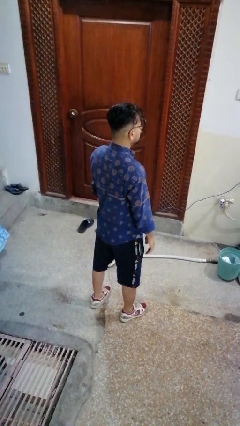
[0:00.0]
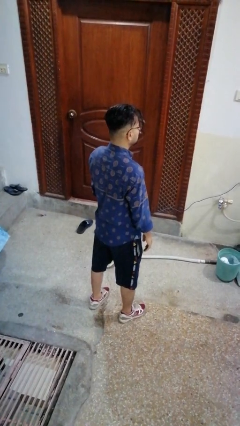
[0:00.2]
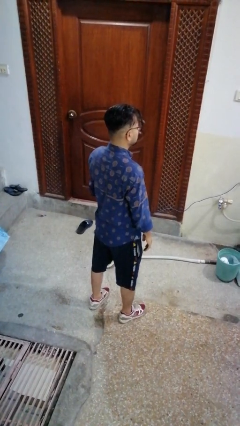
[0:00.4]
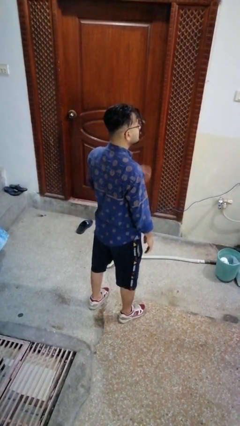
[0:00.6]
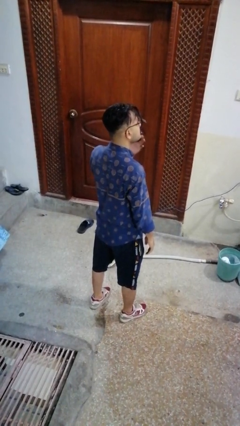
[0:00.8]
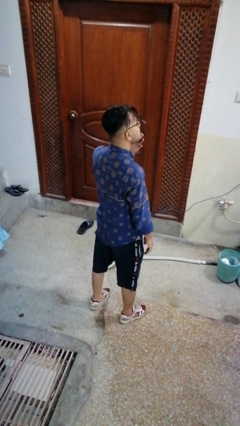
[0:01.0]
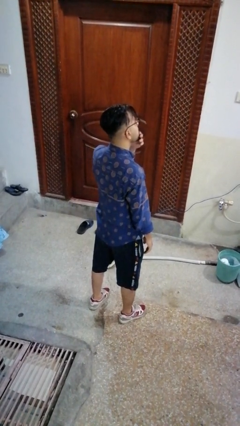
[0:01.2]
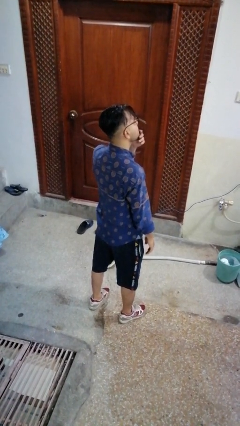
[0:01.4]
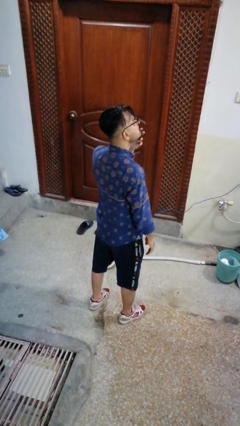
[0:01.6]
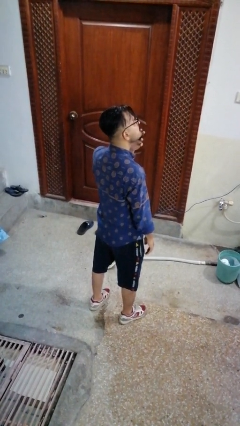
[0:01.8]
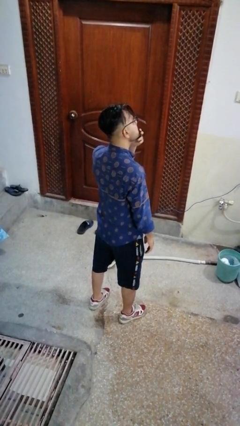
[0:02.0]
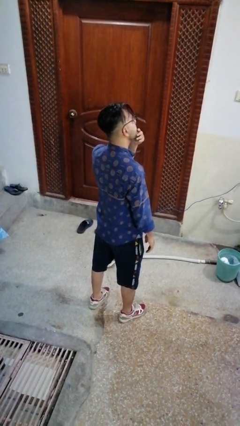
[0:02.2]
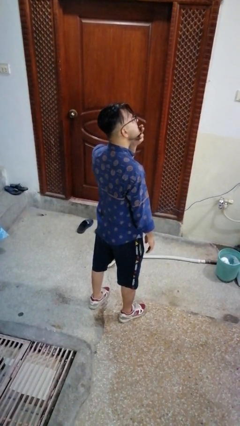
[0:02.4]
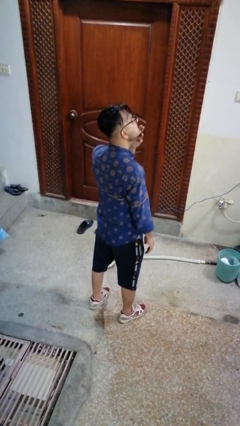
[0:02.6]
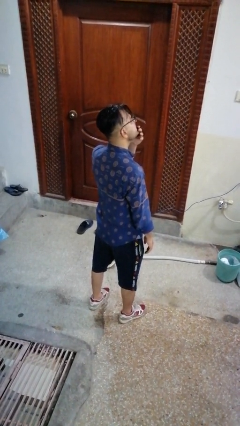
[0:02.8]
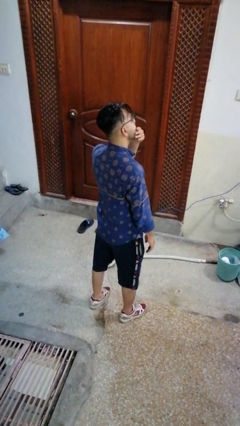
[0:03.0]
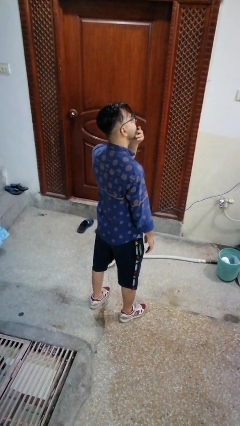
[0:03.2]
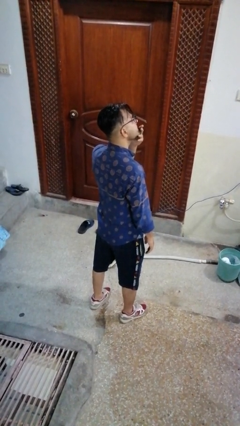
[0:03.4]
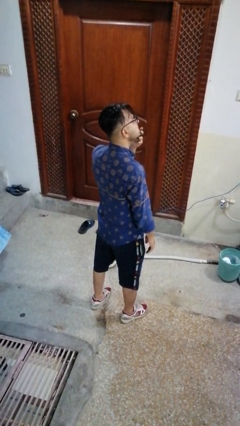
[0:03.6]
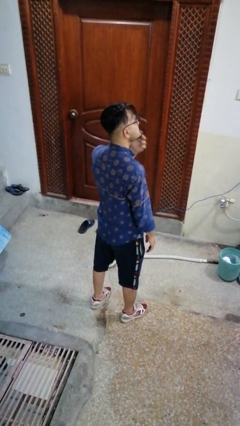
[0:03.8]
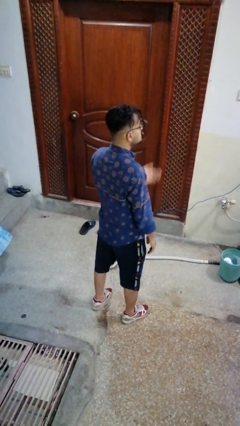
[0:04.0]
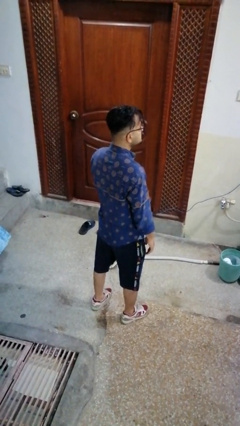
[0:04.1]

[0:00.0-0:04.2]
person strokes chin

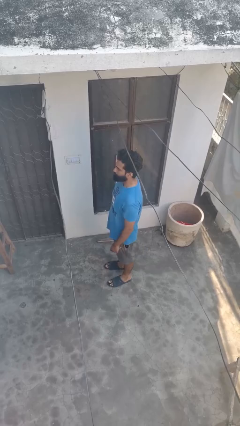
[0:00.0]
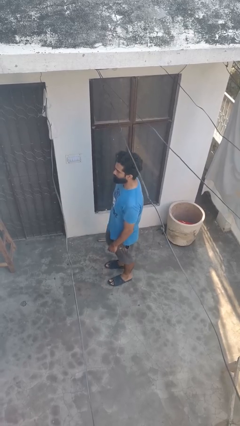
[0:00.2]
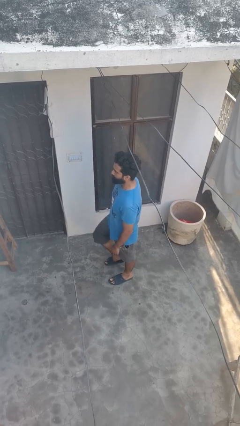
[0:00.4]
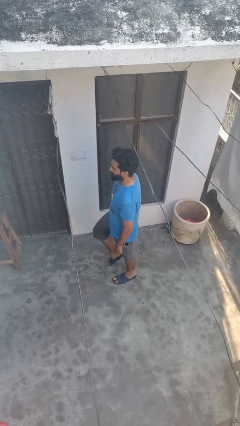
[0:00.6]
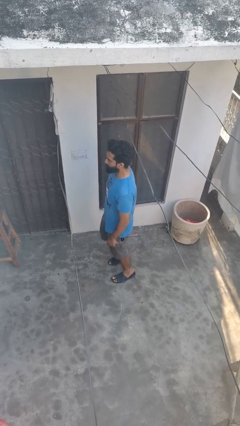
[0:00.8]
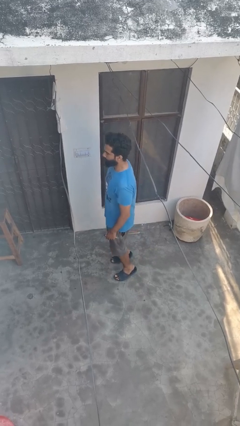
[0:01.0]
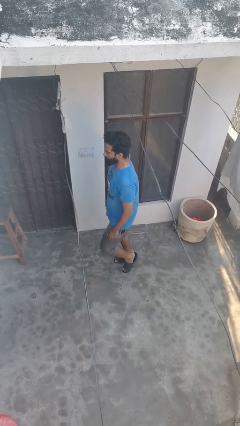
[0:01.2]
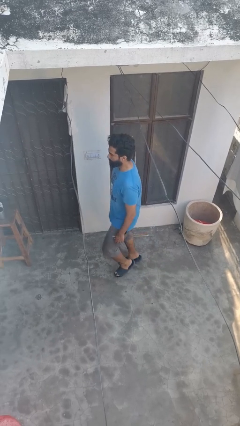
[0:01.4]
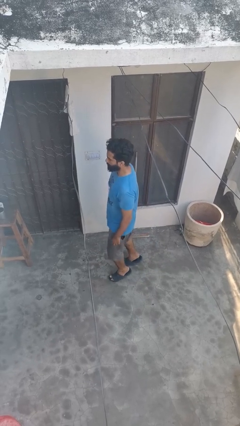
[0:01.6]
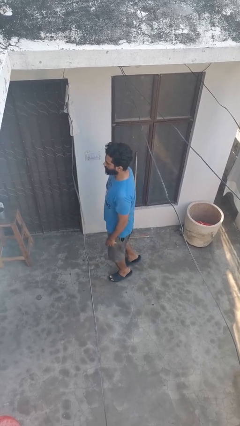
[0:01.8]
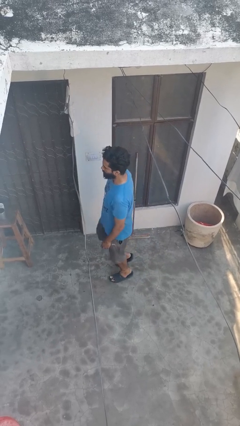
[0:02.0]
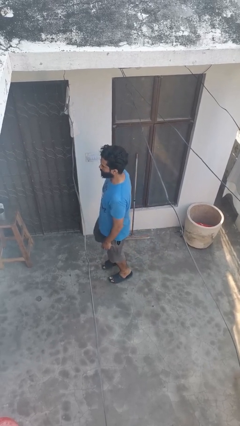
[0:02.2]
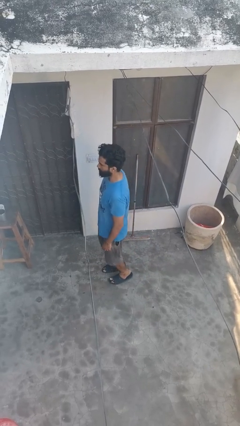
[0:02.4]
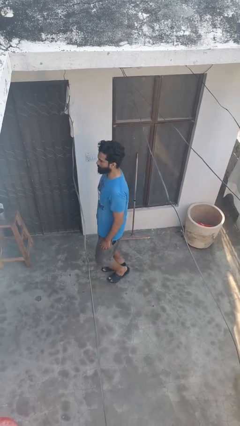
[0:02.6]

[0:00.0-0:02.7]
person walks tiptoe

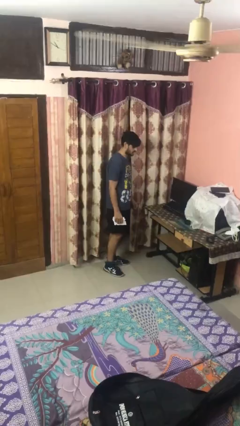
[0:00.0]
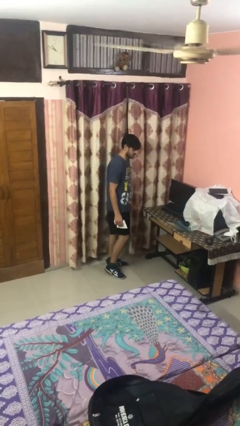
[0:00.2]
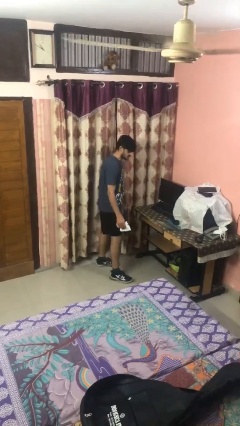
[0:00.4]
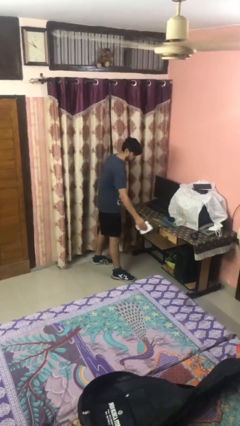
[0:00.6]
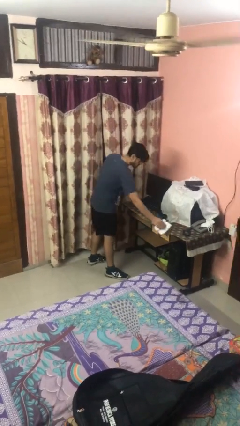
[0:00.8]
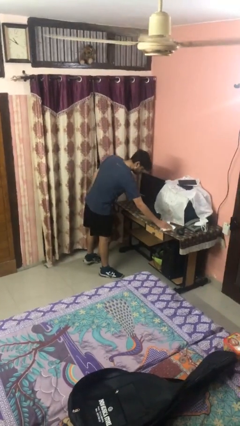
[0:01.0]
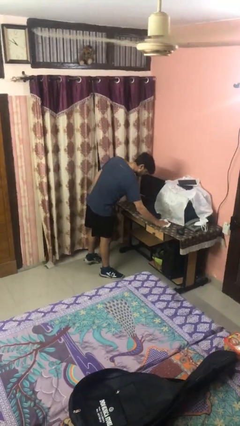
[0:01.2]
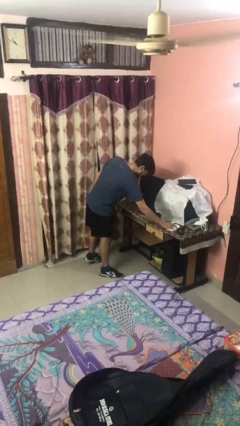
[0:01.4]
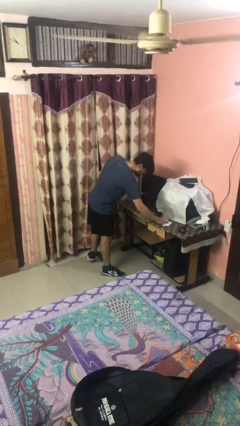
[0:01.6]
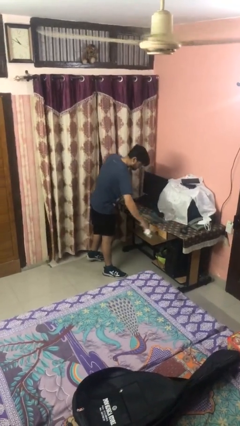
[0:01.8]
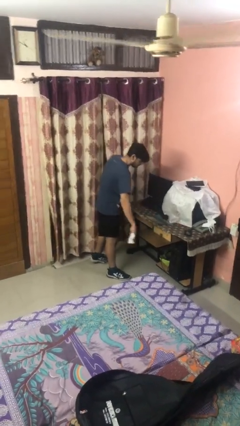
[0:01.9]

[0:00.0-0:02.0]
person cleans table with rag

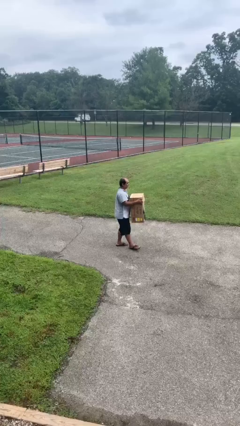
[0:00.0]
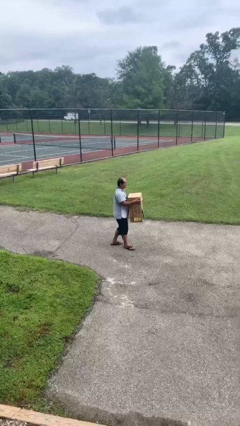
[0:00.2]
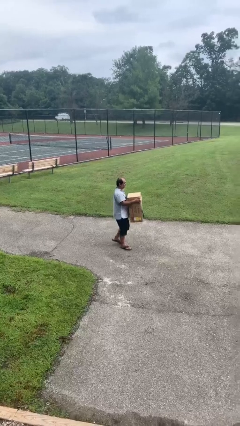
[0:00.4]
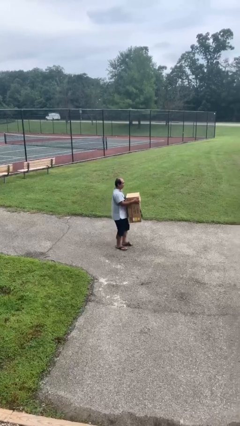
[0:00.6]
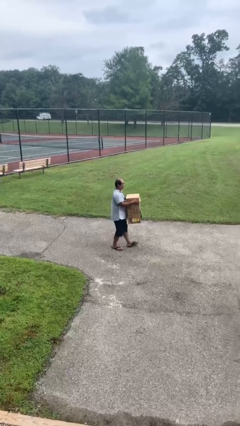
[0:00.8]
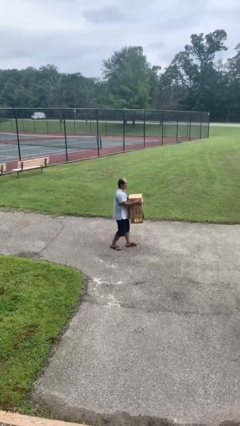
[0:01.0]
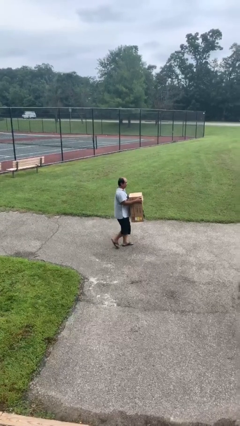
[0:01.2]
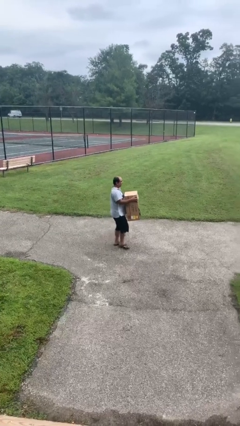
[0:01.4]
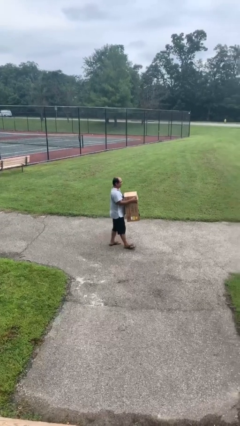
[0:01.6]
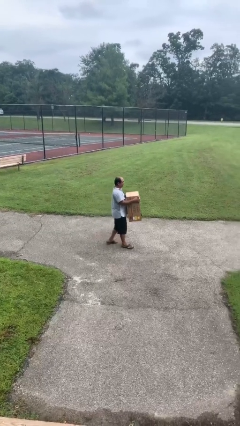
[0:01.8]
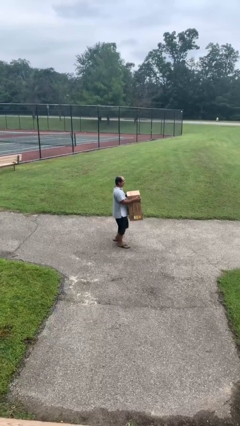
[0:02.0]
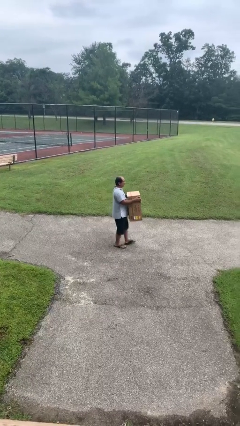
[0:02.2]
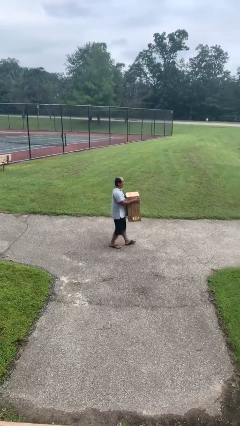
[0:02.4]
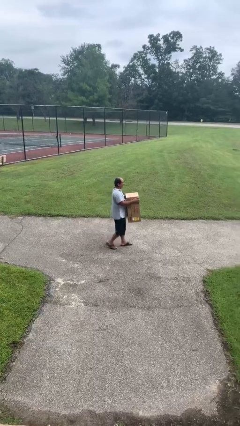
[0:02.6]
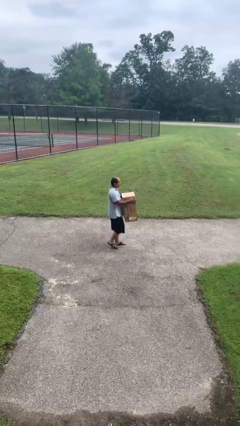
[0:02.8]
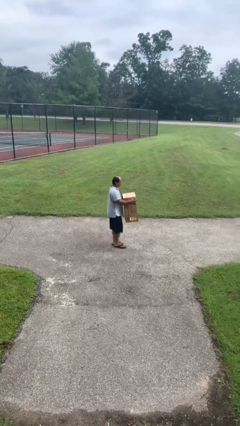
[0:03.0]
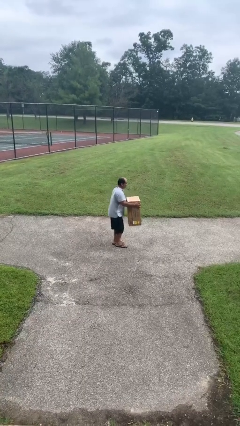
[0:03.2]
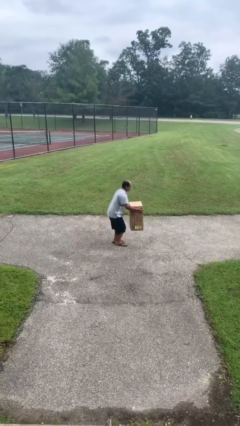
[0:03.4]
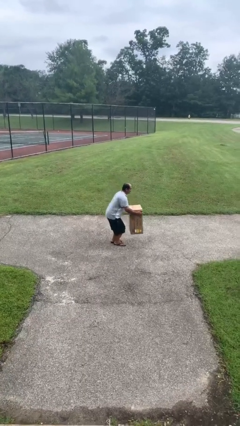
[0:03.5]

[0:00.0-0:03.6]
person carries heavy object

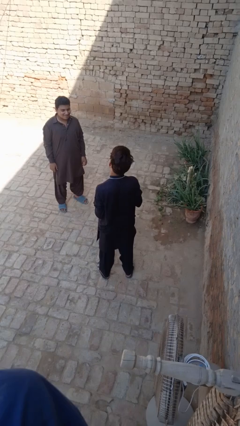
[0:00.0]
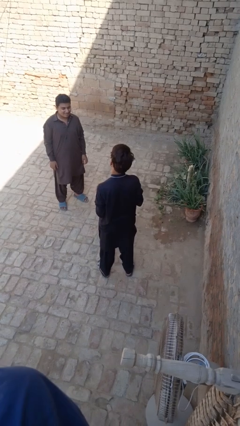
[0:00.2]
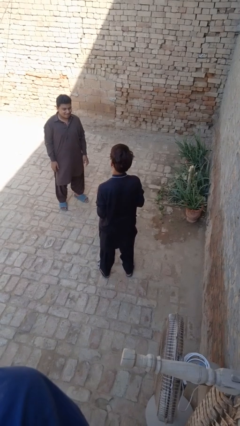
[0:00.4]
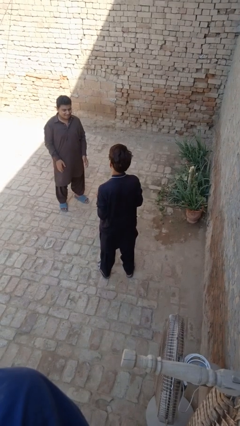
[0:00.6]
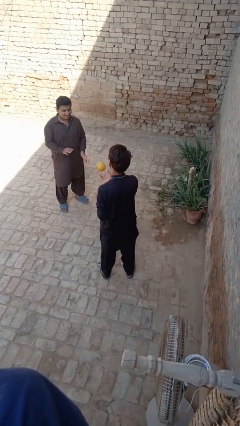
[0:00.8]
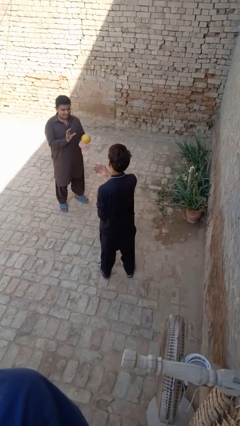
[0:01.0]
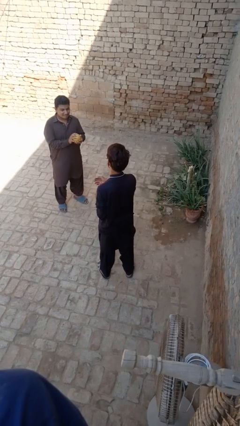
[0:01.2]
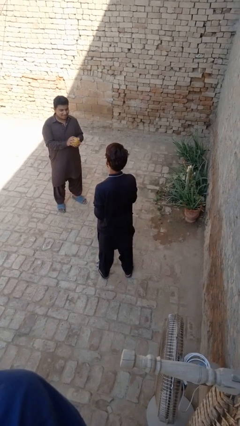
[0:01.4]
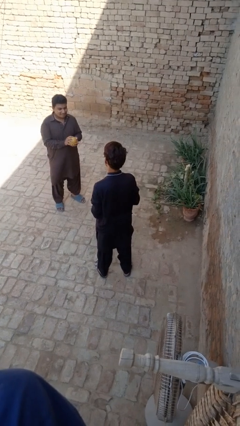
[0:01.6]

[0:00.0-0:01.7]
person throws object to person

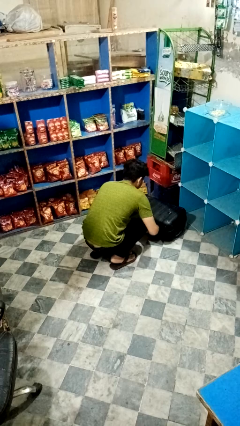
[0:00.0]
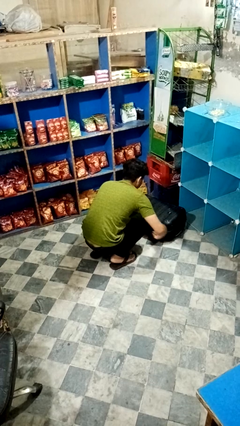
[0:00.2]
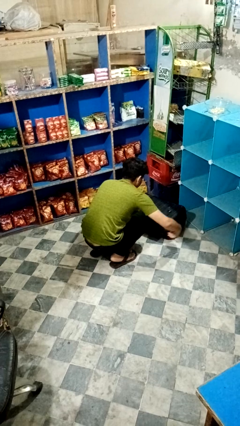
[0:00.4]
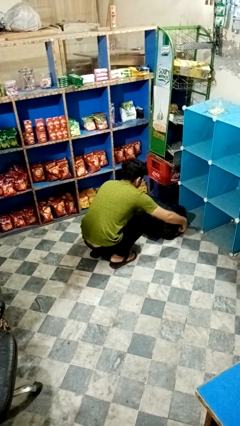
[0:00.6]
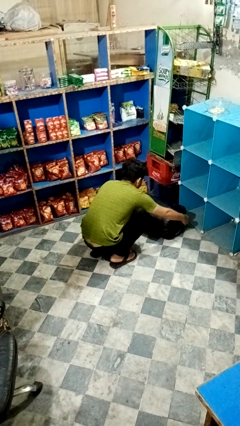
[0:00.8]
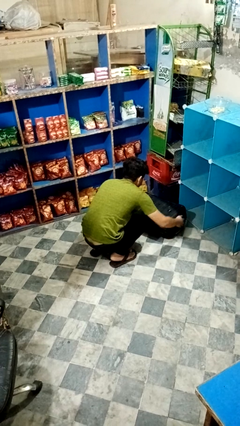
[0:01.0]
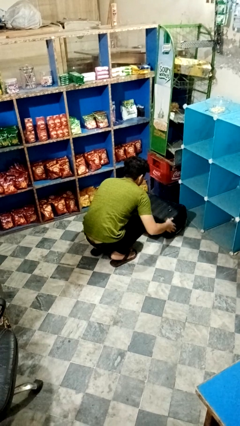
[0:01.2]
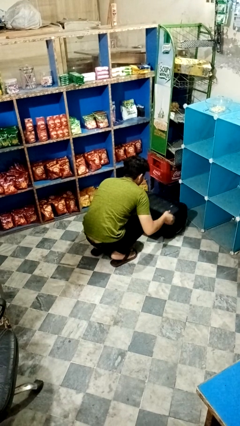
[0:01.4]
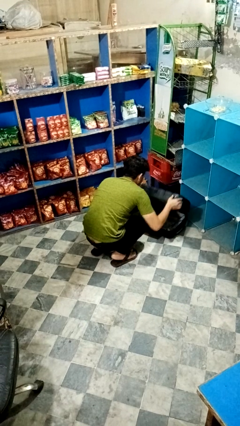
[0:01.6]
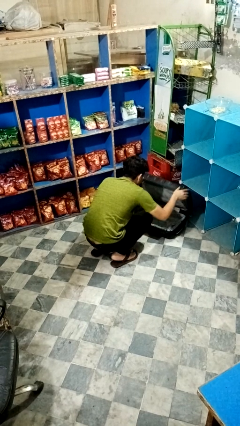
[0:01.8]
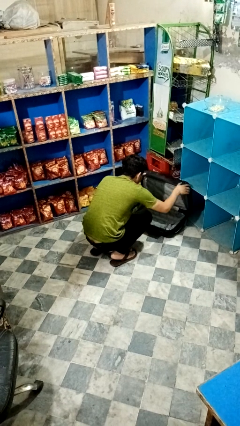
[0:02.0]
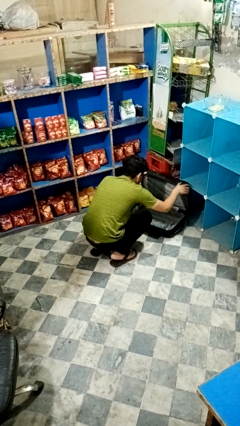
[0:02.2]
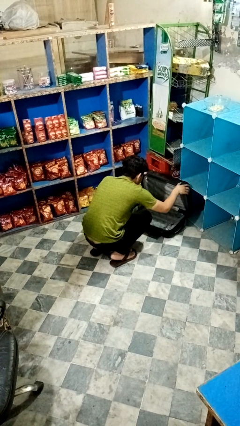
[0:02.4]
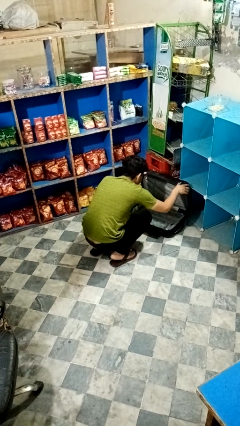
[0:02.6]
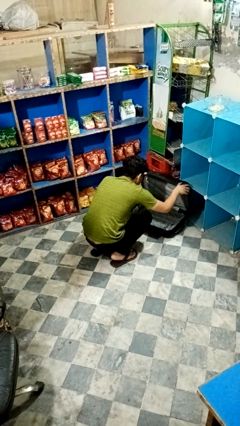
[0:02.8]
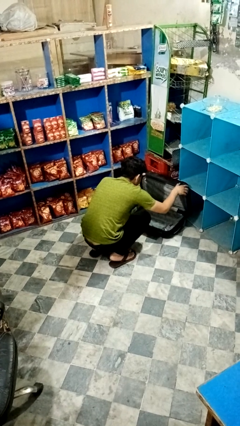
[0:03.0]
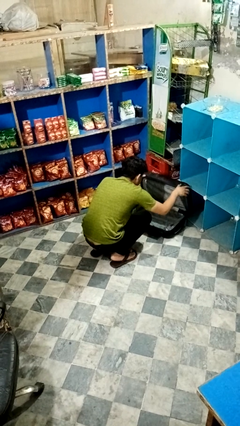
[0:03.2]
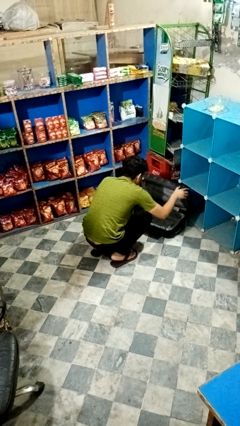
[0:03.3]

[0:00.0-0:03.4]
person opens suitcase
